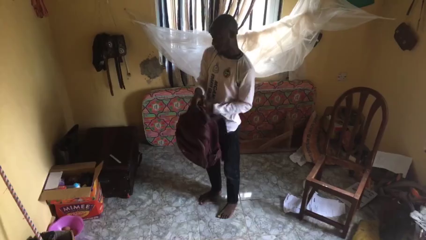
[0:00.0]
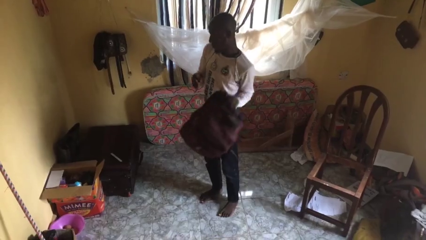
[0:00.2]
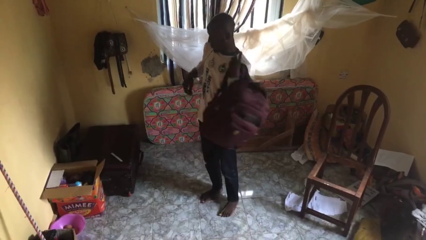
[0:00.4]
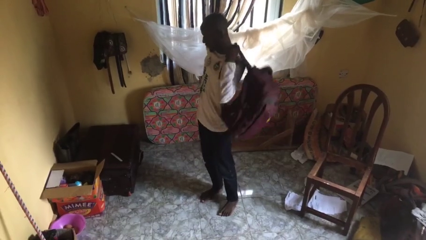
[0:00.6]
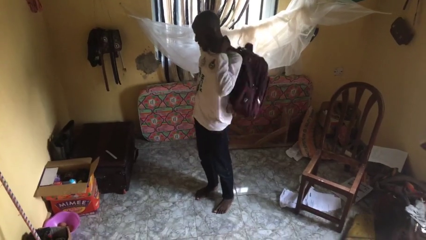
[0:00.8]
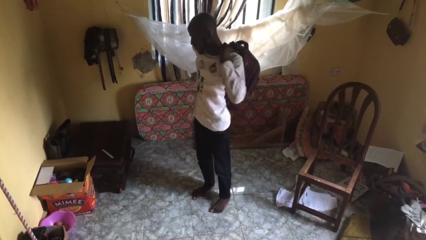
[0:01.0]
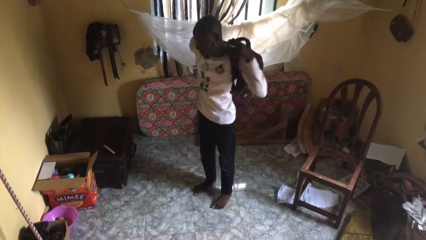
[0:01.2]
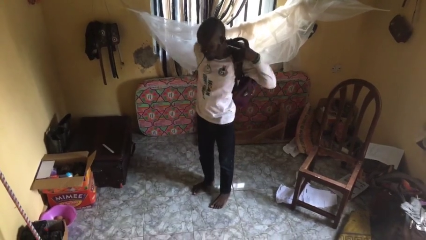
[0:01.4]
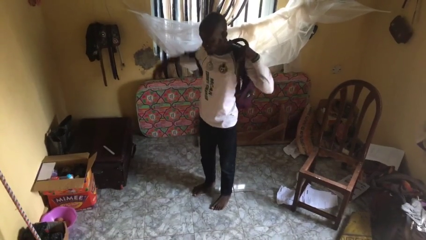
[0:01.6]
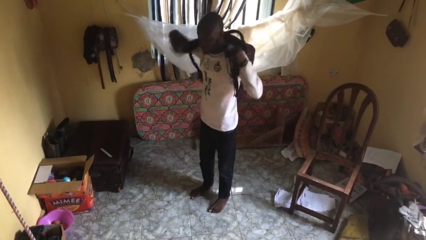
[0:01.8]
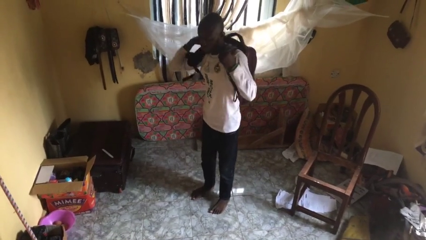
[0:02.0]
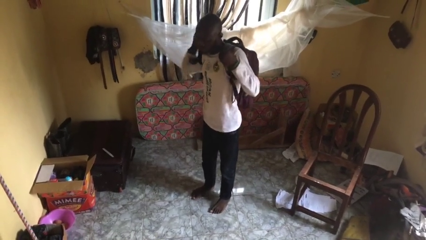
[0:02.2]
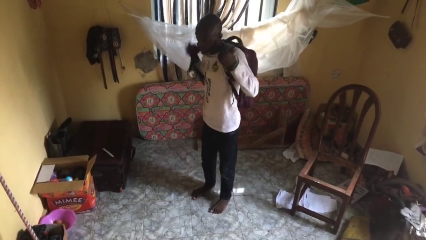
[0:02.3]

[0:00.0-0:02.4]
person puts on backpack

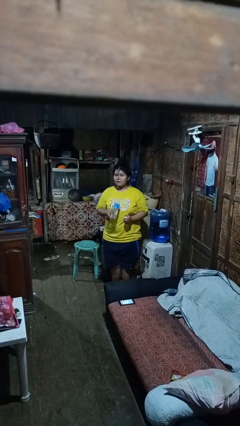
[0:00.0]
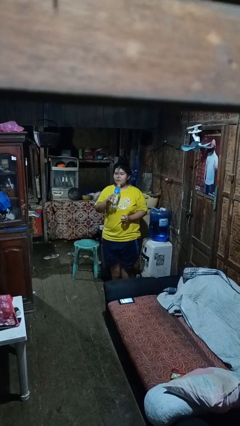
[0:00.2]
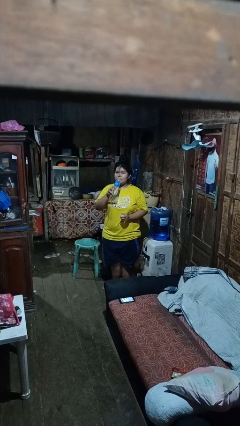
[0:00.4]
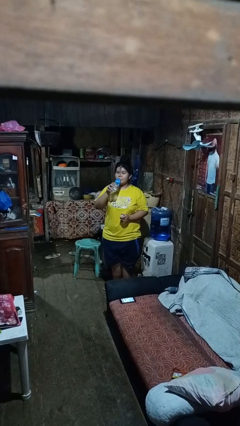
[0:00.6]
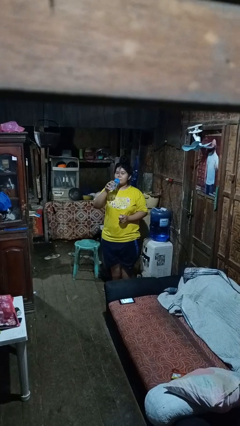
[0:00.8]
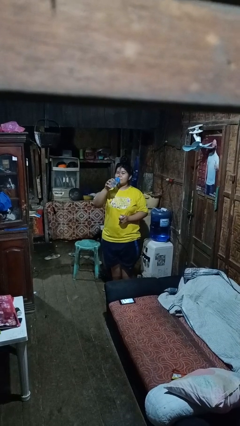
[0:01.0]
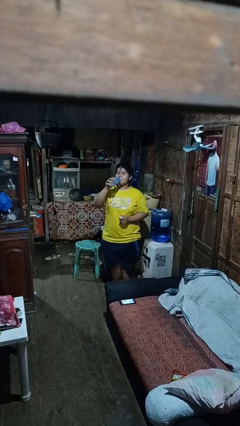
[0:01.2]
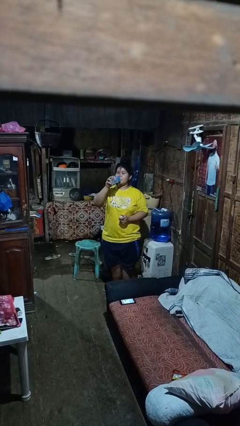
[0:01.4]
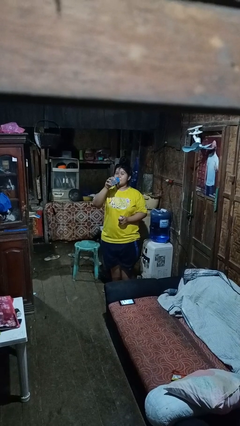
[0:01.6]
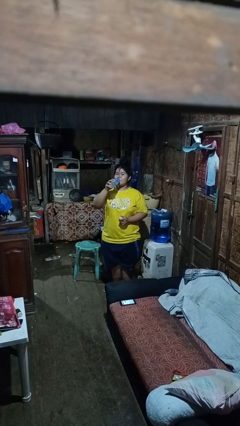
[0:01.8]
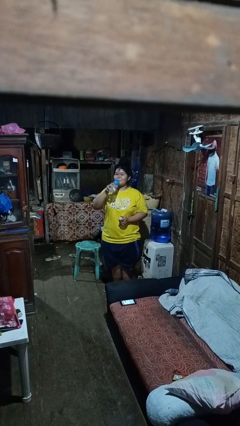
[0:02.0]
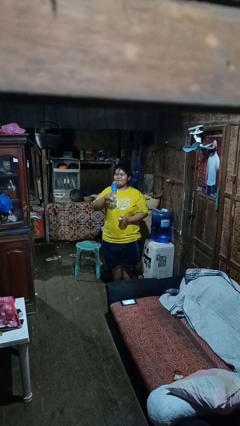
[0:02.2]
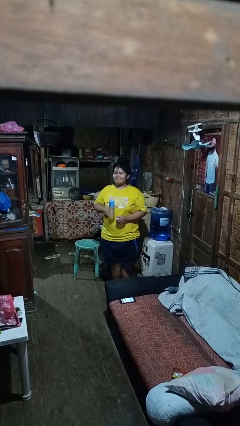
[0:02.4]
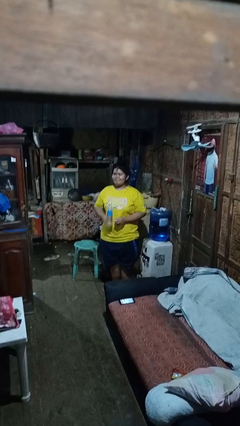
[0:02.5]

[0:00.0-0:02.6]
person drinks from bottle

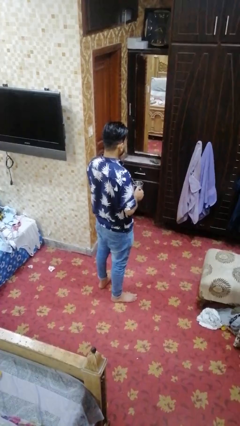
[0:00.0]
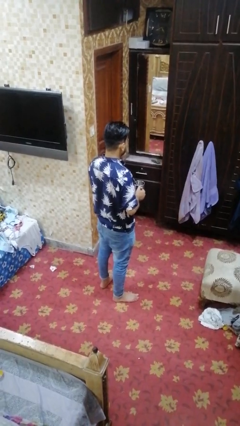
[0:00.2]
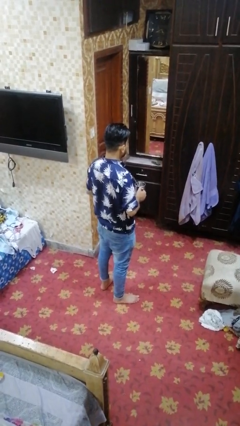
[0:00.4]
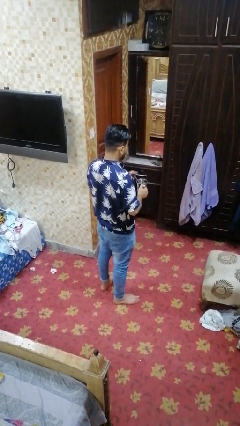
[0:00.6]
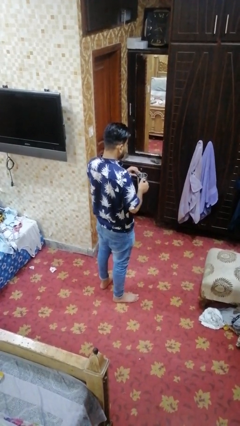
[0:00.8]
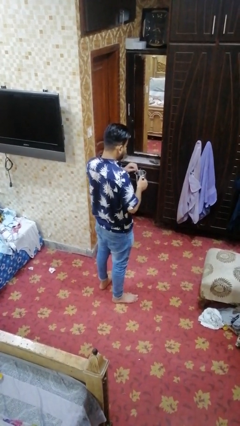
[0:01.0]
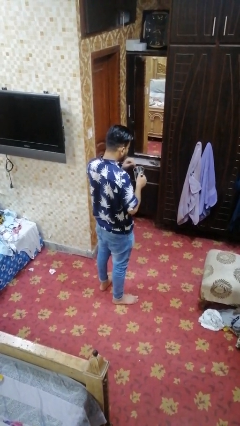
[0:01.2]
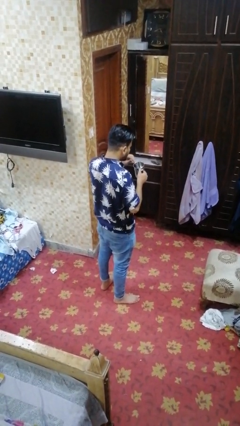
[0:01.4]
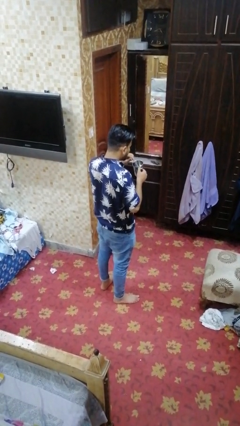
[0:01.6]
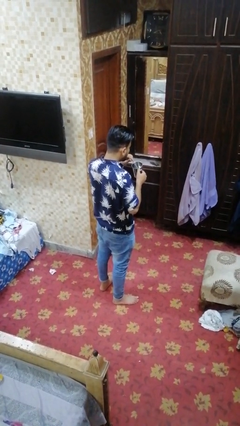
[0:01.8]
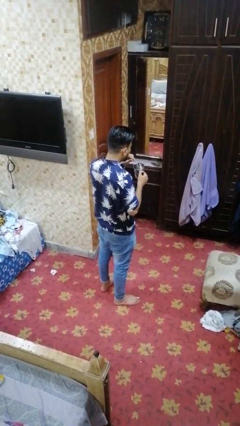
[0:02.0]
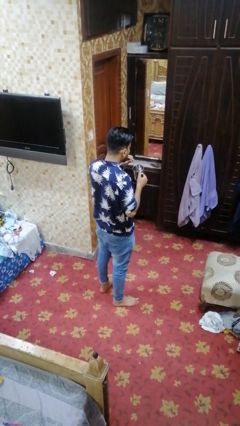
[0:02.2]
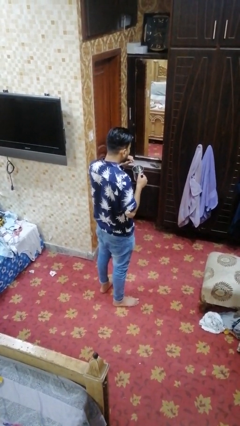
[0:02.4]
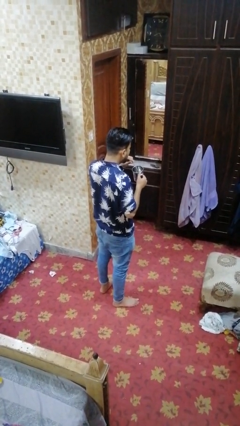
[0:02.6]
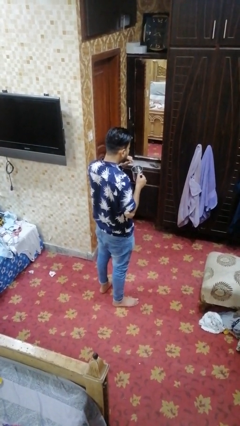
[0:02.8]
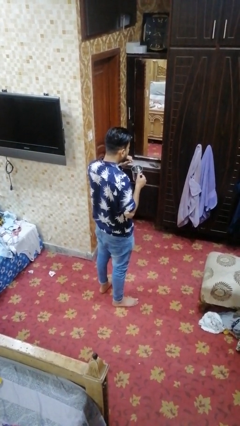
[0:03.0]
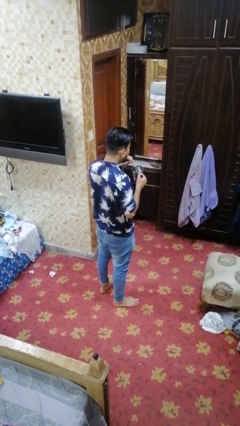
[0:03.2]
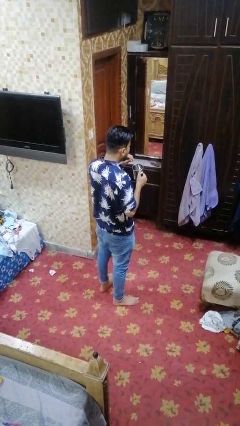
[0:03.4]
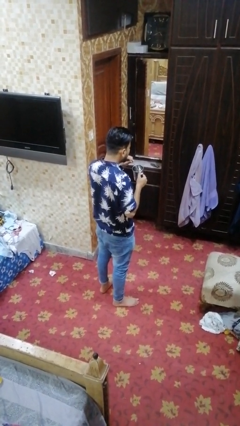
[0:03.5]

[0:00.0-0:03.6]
person drinks from straw

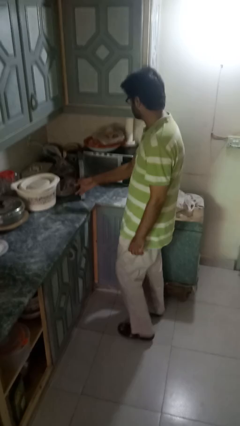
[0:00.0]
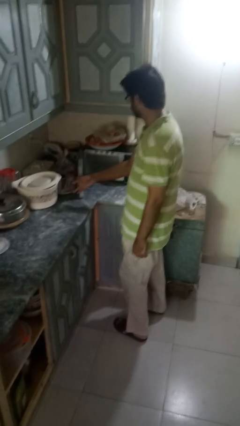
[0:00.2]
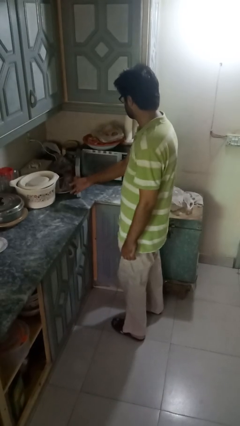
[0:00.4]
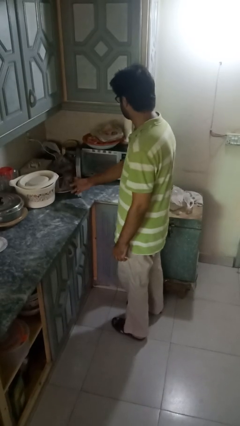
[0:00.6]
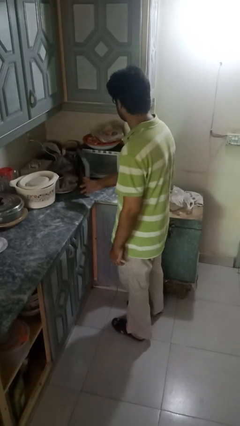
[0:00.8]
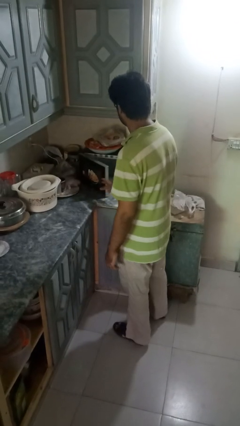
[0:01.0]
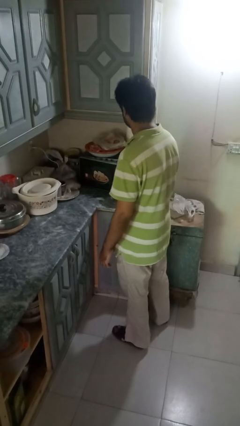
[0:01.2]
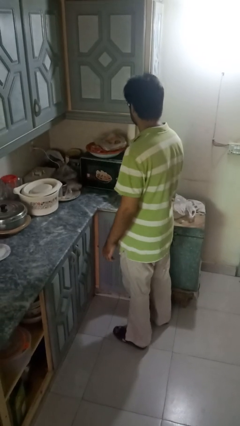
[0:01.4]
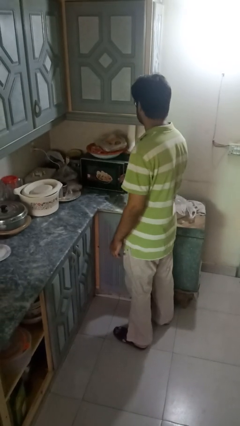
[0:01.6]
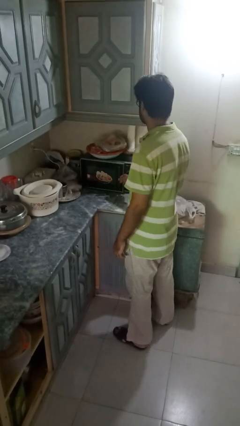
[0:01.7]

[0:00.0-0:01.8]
person closes microwave

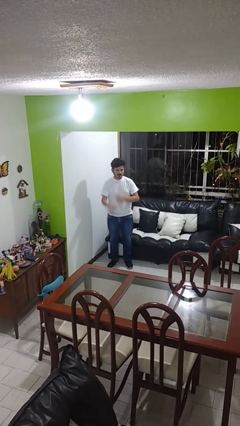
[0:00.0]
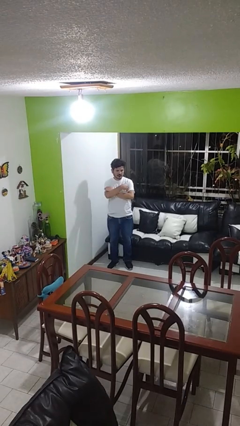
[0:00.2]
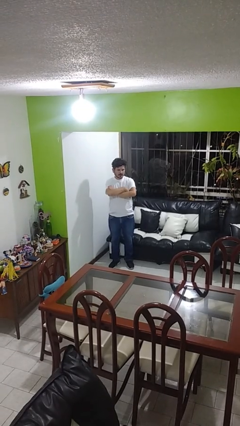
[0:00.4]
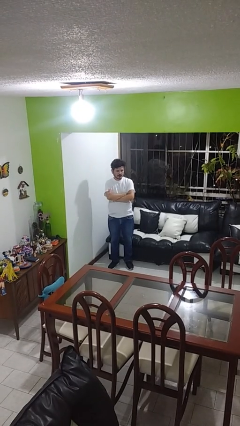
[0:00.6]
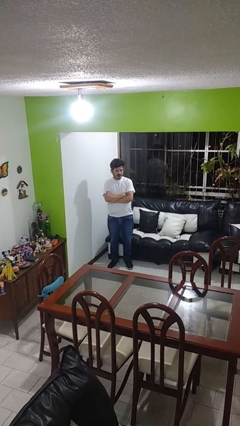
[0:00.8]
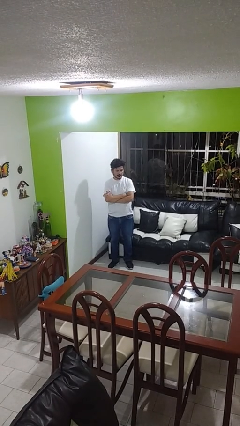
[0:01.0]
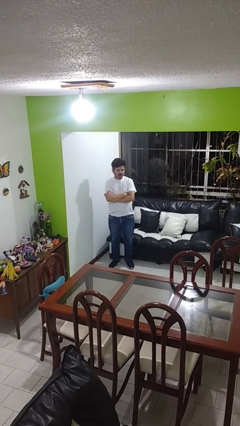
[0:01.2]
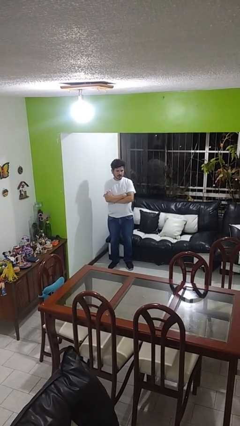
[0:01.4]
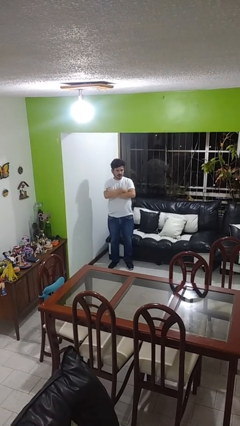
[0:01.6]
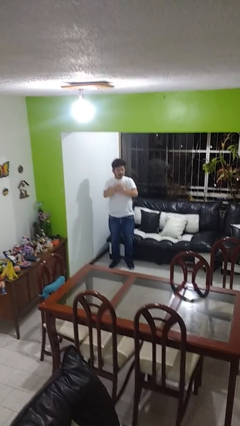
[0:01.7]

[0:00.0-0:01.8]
person crosses arms

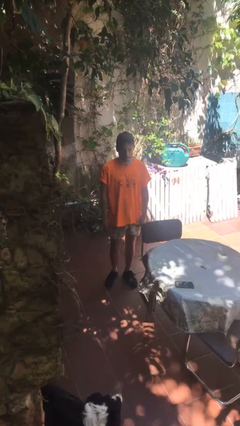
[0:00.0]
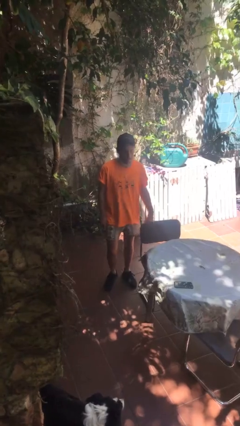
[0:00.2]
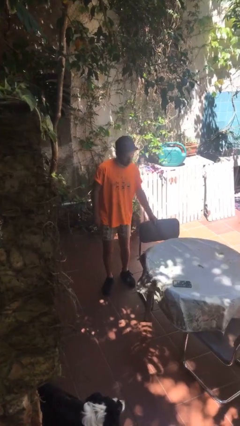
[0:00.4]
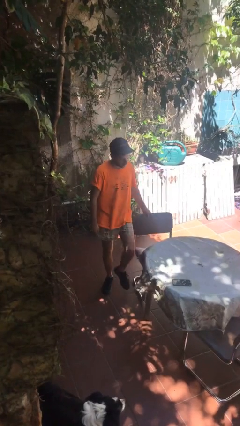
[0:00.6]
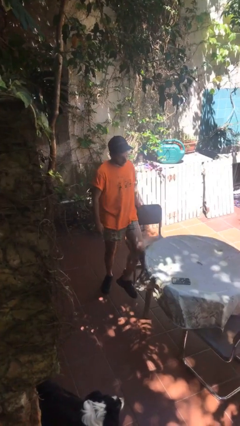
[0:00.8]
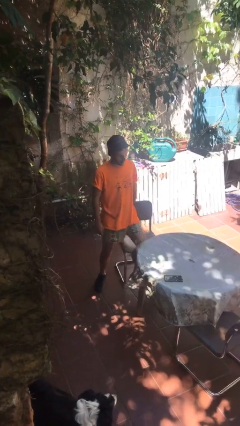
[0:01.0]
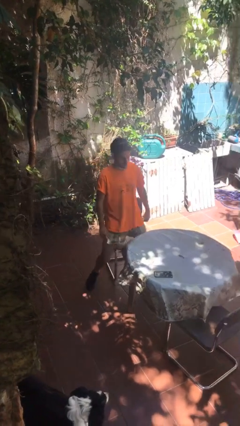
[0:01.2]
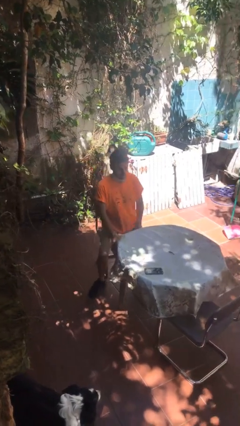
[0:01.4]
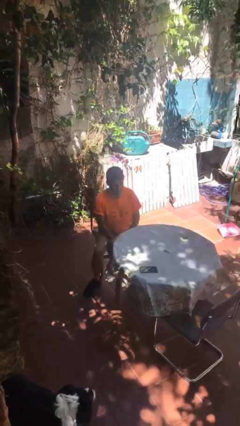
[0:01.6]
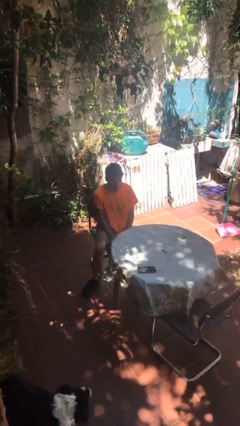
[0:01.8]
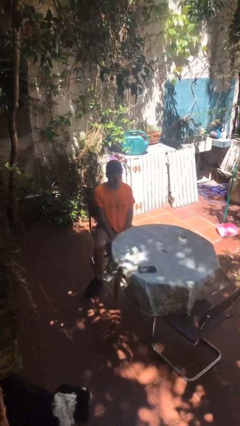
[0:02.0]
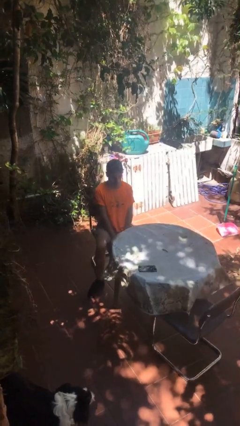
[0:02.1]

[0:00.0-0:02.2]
person sits down

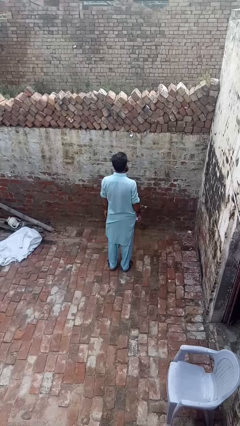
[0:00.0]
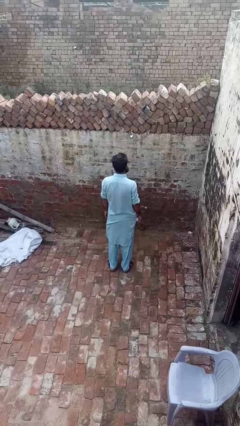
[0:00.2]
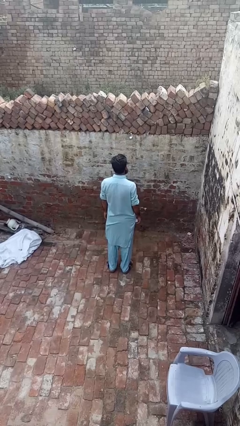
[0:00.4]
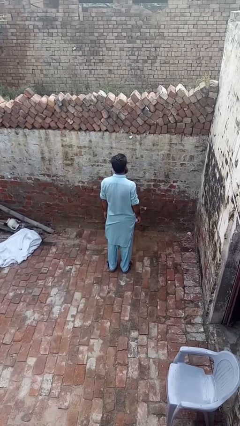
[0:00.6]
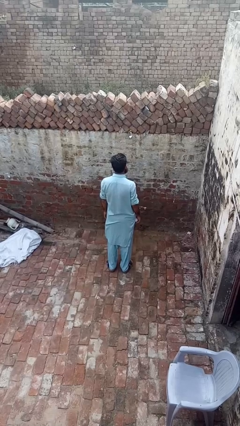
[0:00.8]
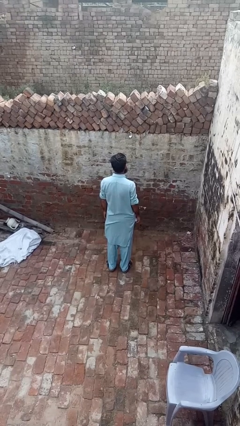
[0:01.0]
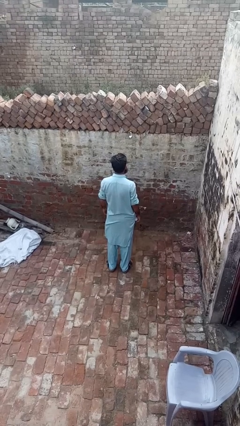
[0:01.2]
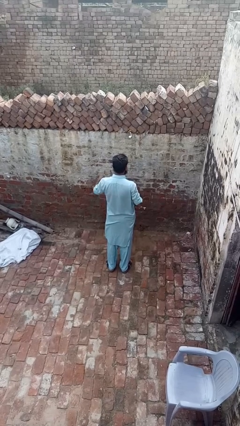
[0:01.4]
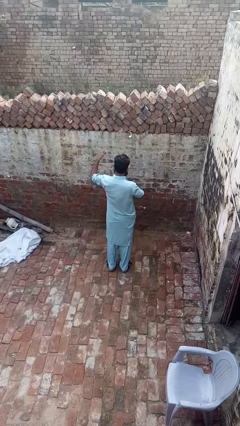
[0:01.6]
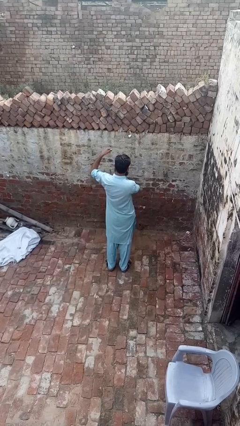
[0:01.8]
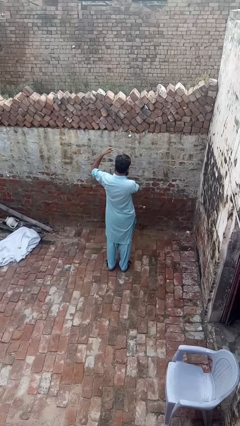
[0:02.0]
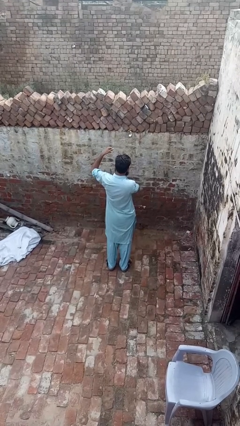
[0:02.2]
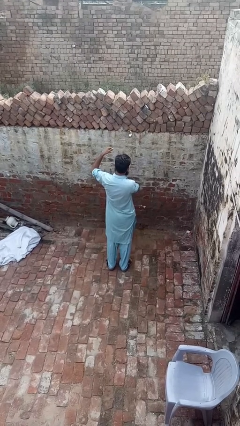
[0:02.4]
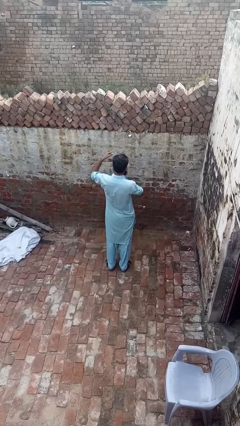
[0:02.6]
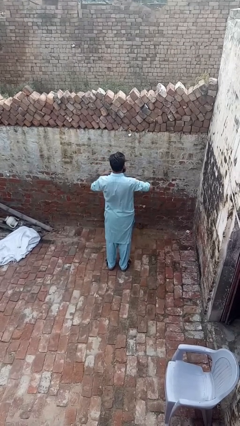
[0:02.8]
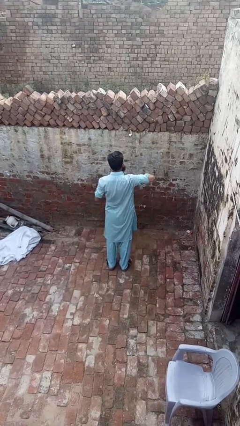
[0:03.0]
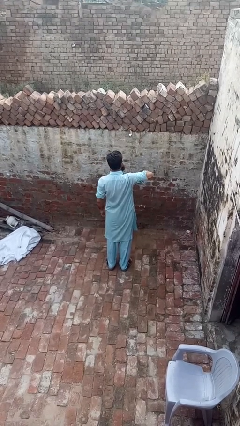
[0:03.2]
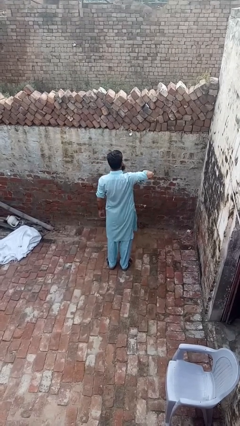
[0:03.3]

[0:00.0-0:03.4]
person applies deodorant
